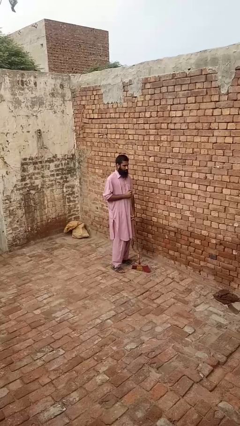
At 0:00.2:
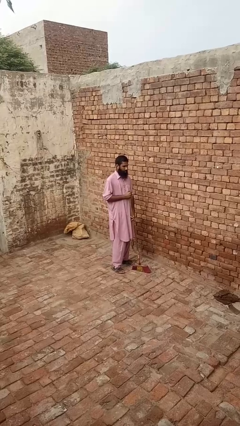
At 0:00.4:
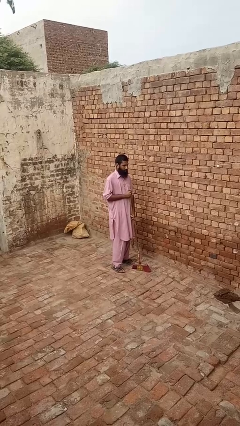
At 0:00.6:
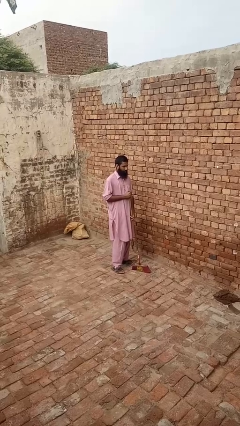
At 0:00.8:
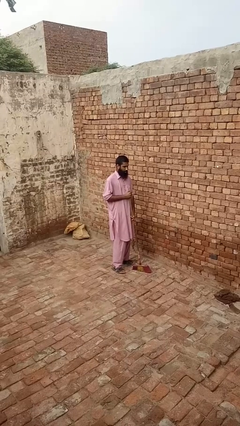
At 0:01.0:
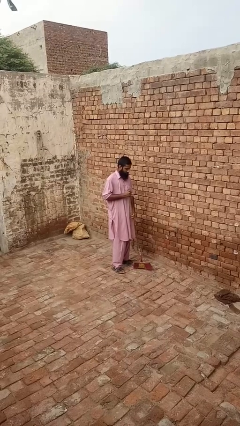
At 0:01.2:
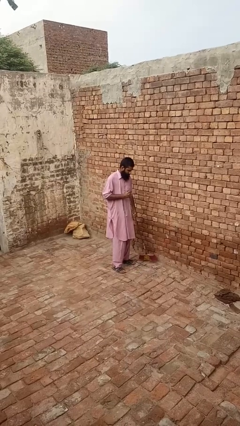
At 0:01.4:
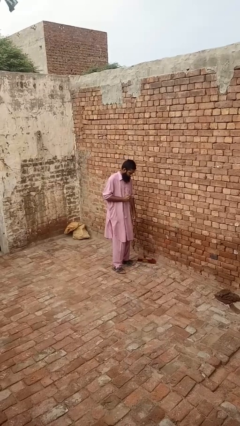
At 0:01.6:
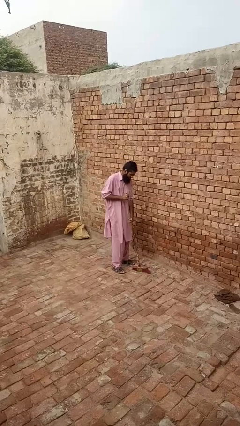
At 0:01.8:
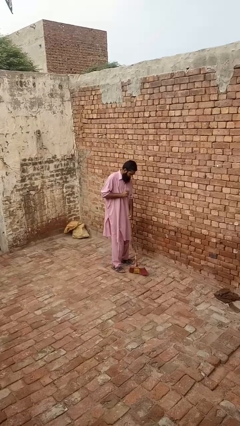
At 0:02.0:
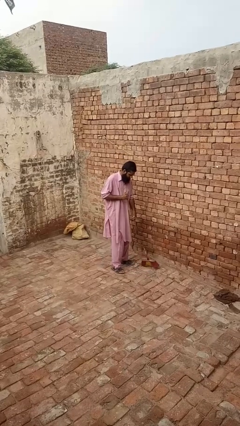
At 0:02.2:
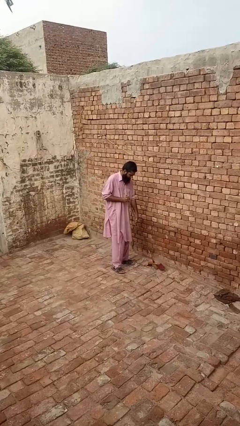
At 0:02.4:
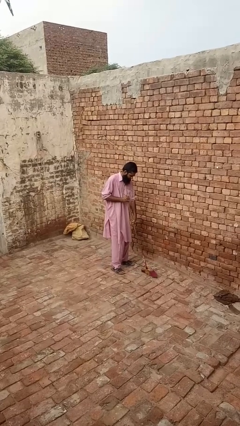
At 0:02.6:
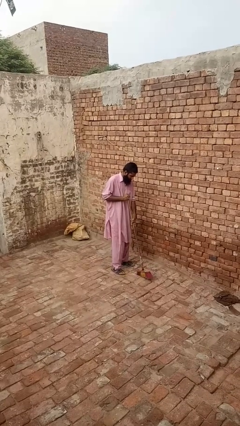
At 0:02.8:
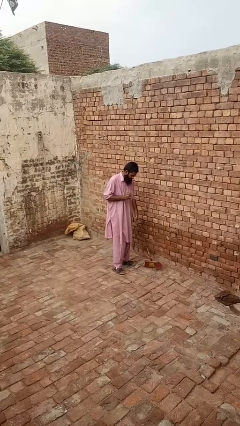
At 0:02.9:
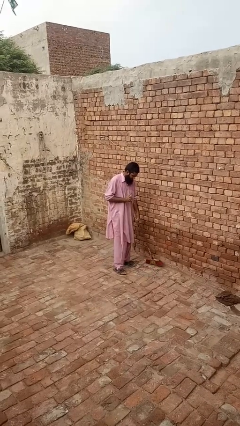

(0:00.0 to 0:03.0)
person sweeps floor

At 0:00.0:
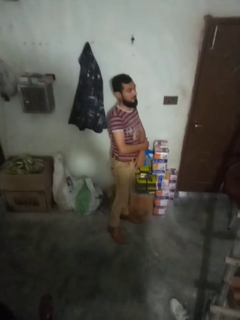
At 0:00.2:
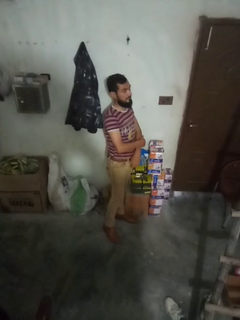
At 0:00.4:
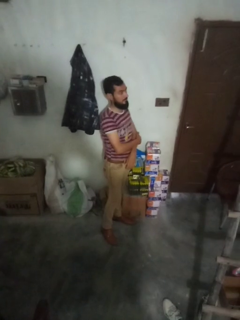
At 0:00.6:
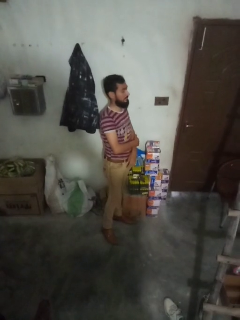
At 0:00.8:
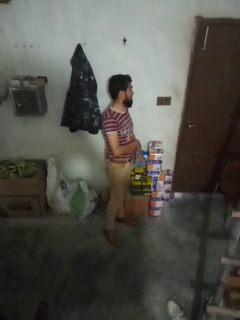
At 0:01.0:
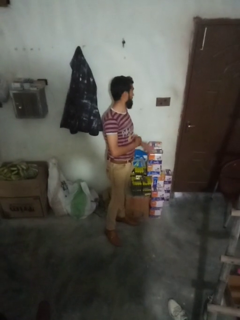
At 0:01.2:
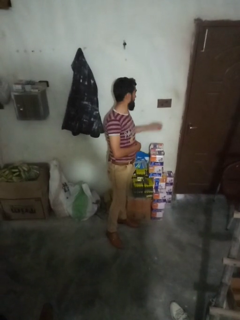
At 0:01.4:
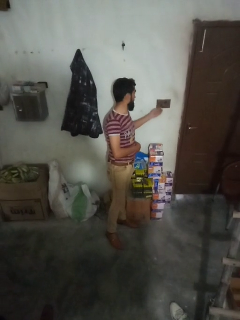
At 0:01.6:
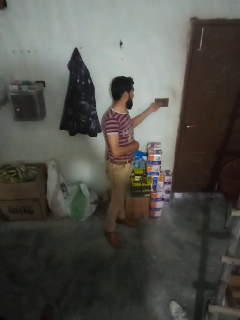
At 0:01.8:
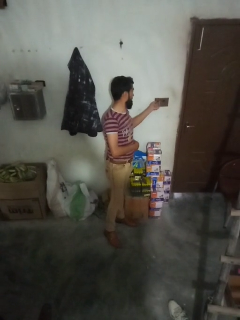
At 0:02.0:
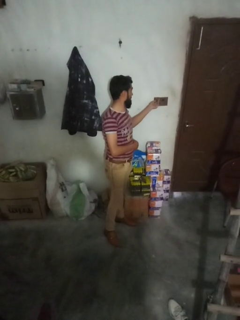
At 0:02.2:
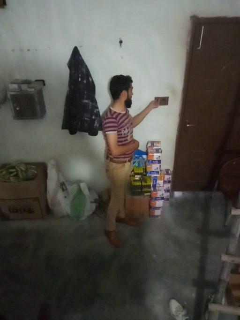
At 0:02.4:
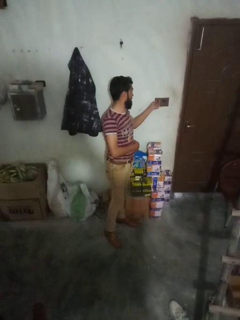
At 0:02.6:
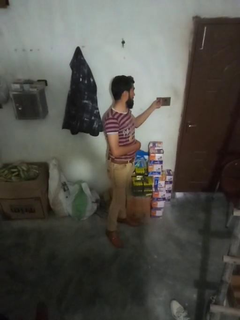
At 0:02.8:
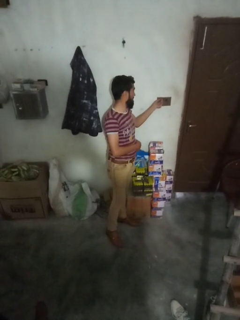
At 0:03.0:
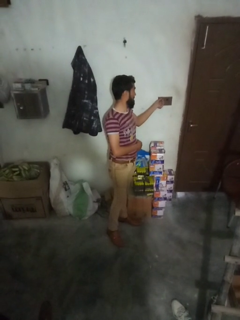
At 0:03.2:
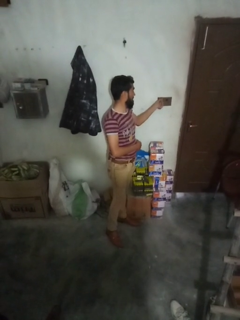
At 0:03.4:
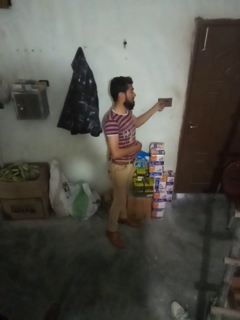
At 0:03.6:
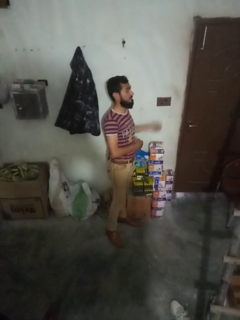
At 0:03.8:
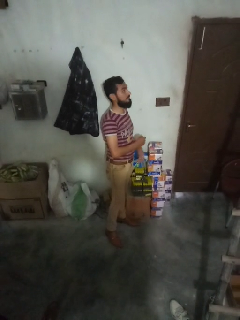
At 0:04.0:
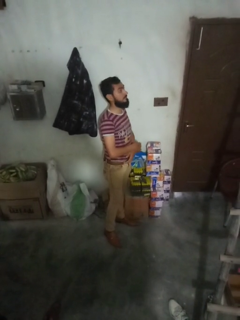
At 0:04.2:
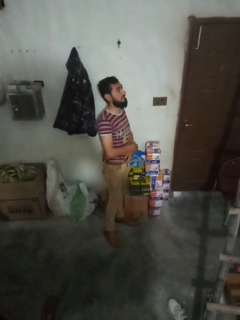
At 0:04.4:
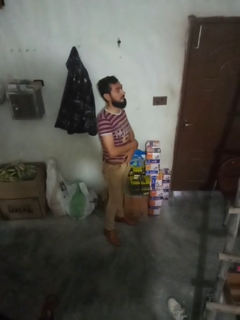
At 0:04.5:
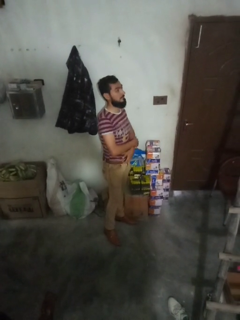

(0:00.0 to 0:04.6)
person adjusts thermostat

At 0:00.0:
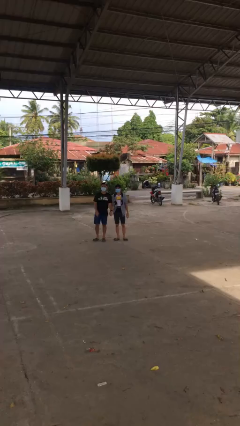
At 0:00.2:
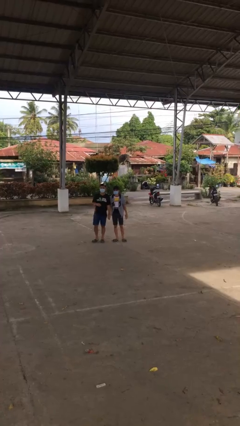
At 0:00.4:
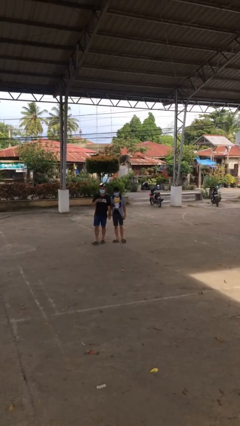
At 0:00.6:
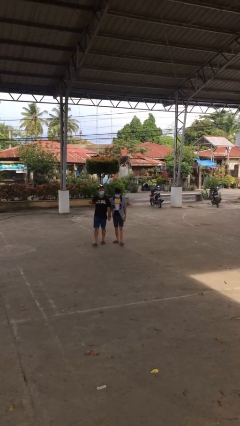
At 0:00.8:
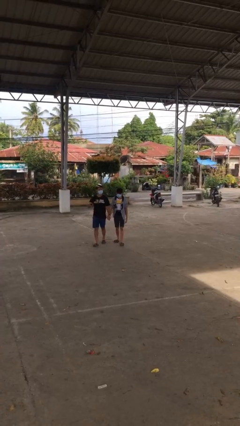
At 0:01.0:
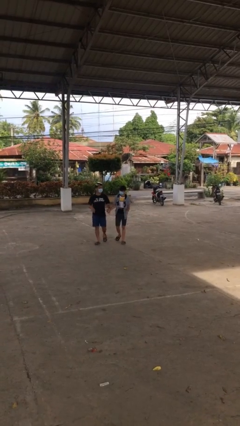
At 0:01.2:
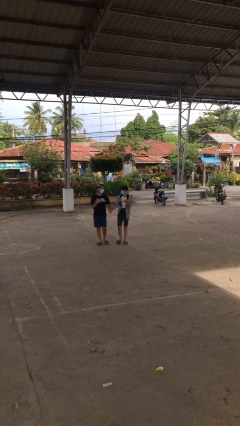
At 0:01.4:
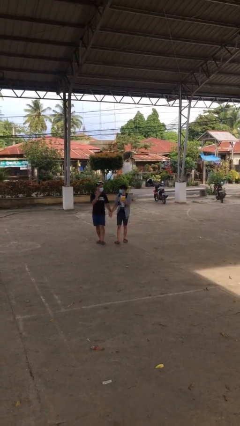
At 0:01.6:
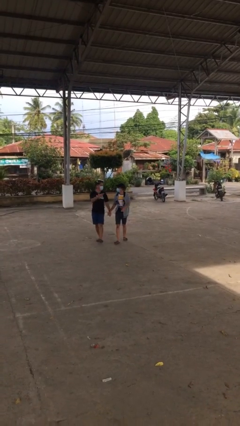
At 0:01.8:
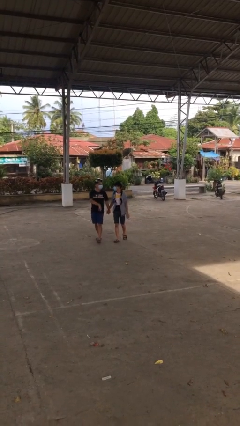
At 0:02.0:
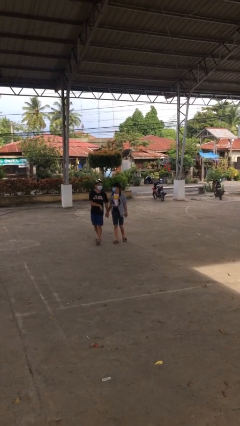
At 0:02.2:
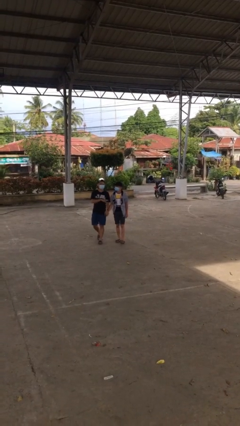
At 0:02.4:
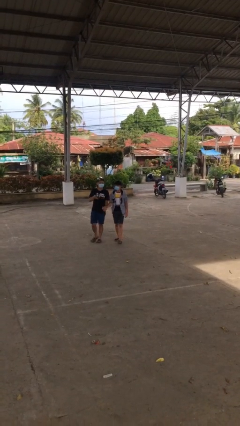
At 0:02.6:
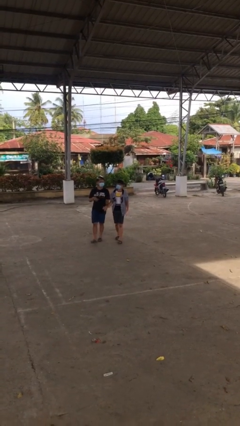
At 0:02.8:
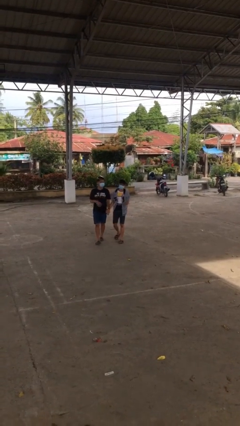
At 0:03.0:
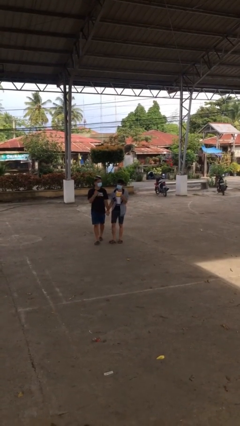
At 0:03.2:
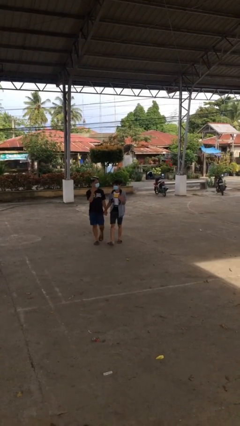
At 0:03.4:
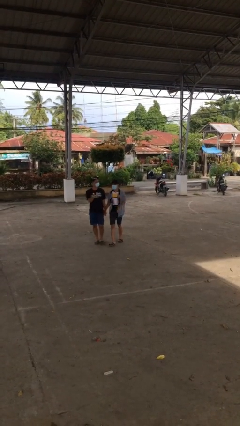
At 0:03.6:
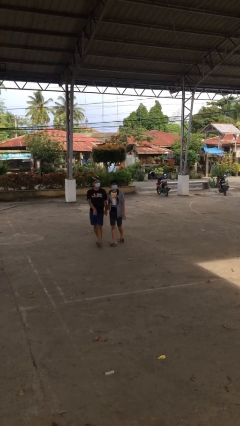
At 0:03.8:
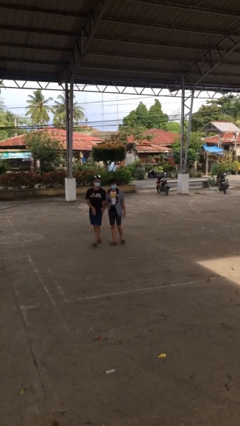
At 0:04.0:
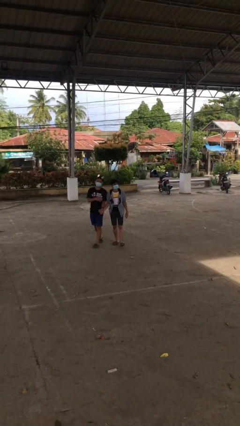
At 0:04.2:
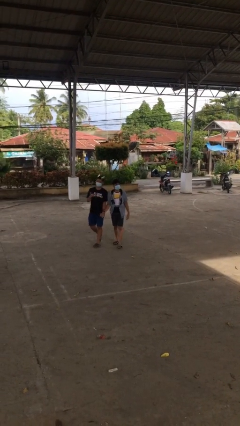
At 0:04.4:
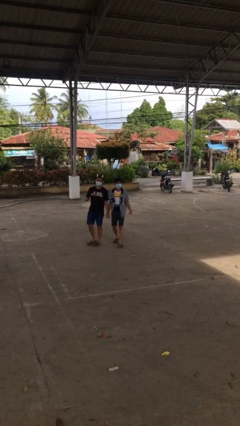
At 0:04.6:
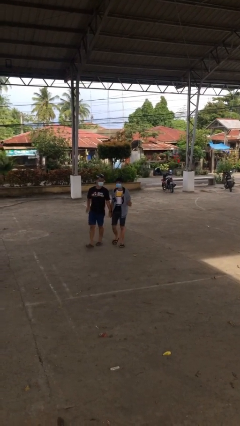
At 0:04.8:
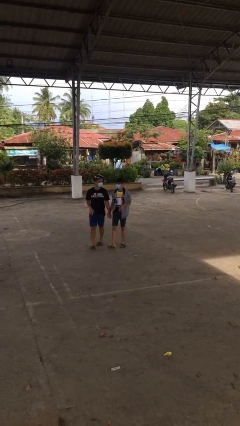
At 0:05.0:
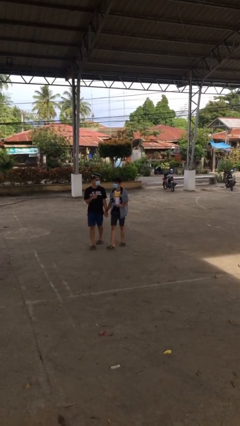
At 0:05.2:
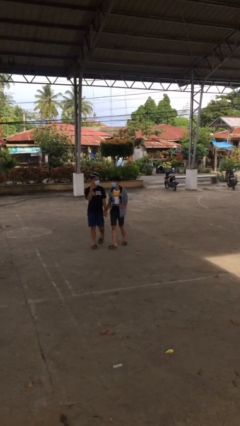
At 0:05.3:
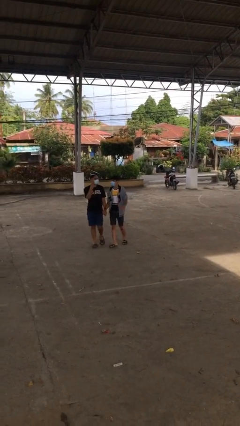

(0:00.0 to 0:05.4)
person holds hand

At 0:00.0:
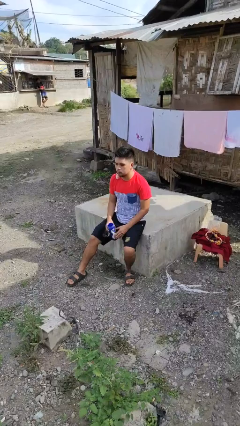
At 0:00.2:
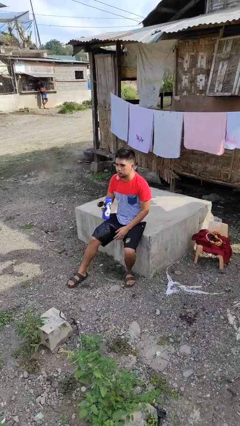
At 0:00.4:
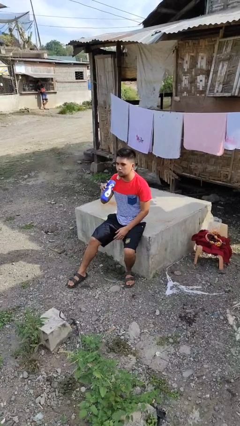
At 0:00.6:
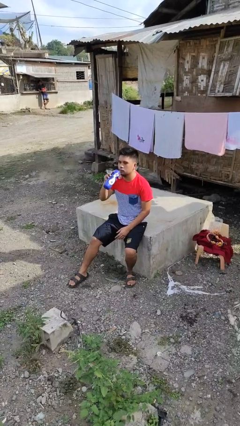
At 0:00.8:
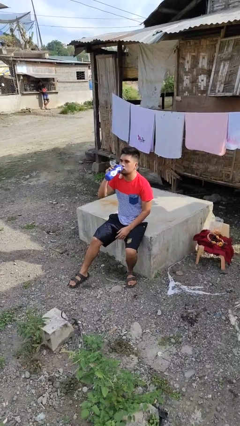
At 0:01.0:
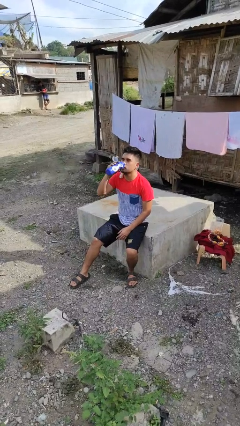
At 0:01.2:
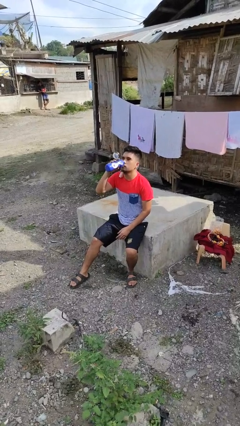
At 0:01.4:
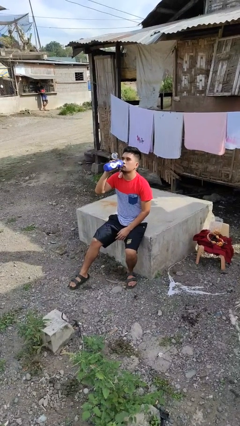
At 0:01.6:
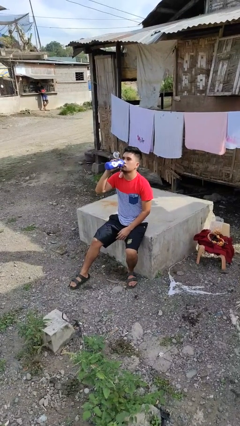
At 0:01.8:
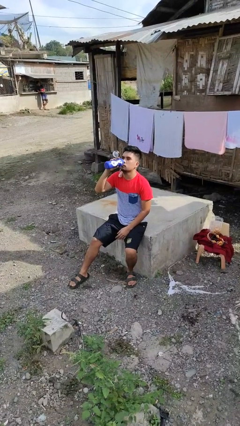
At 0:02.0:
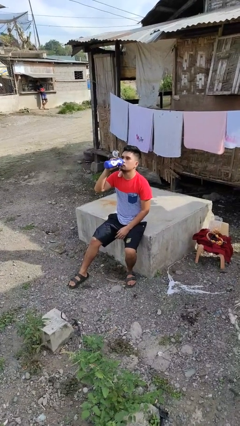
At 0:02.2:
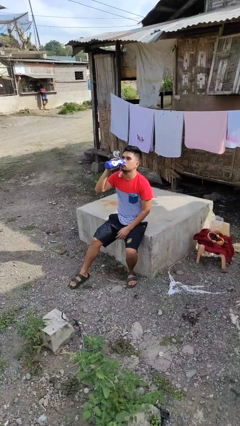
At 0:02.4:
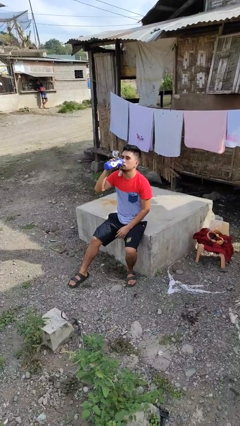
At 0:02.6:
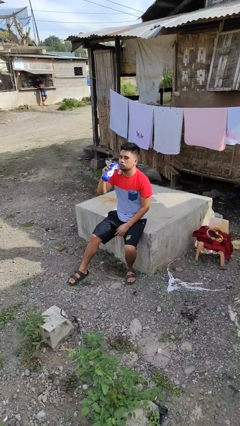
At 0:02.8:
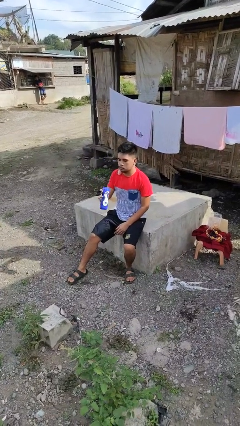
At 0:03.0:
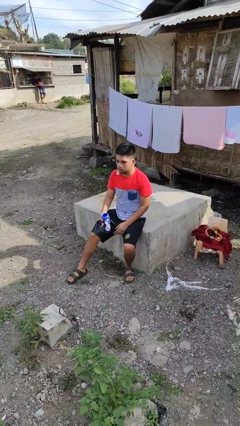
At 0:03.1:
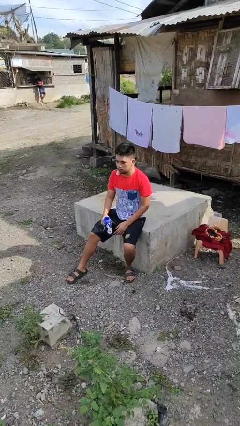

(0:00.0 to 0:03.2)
person drinks from bottle

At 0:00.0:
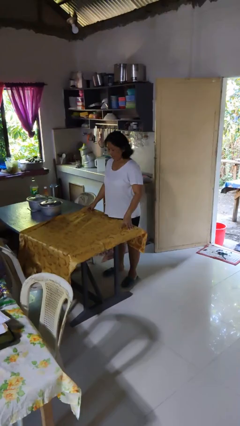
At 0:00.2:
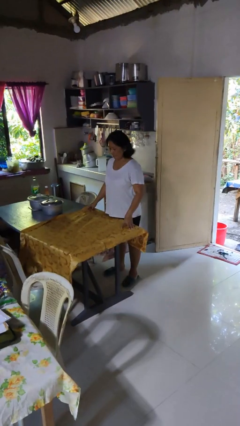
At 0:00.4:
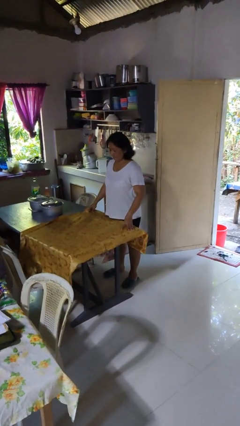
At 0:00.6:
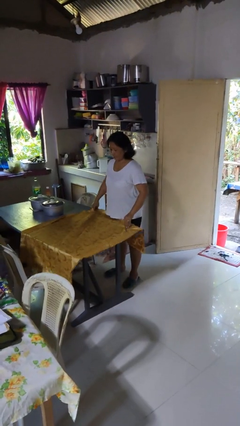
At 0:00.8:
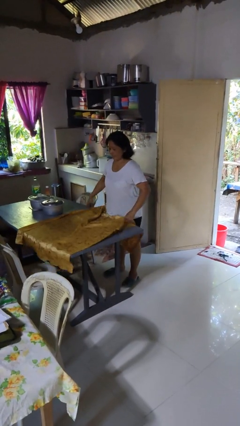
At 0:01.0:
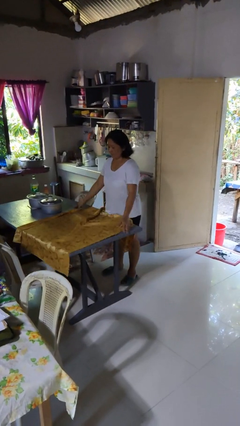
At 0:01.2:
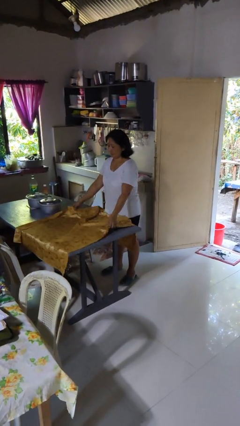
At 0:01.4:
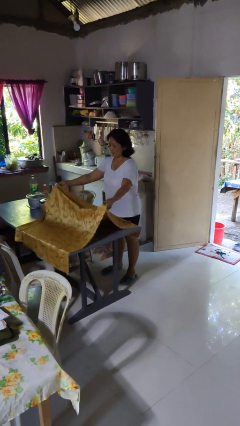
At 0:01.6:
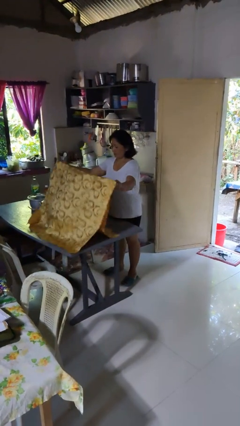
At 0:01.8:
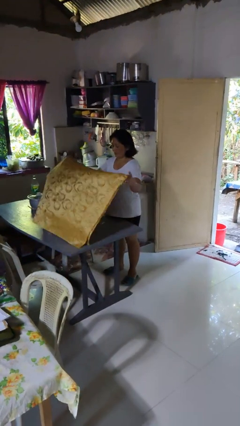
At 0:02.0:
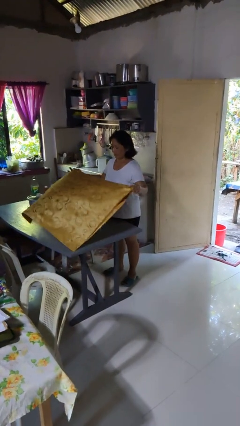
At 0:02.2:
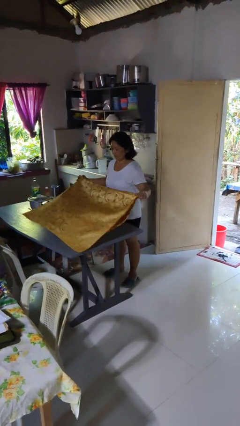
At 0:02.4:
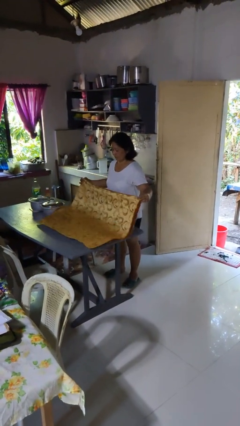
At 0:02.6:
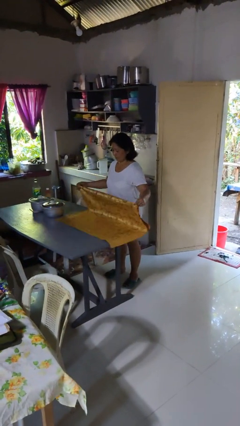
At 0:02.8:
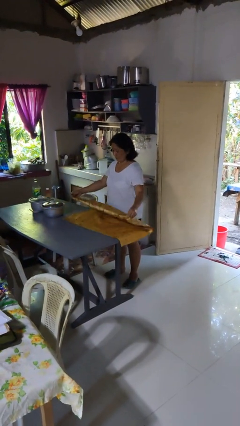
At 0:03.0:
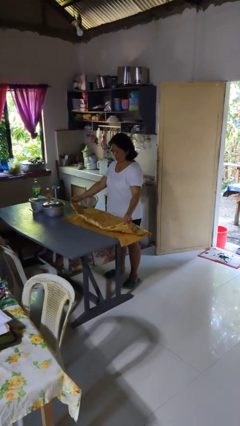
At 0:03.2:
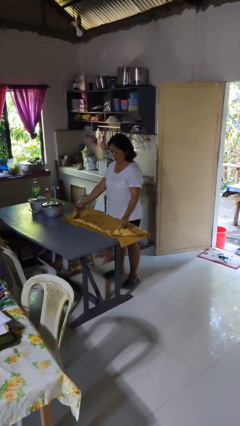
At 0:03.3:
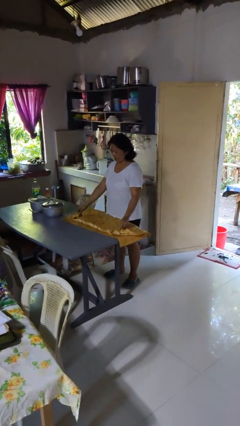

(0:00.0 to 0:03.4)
person folds tablecloth
